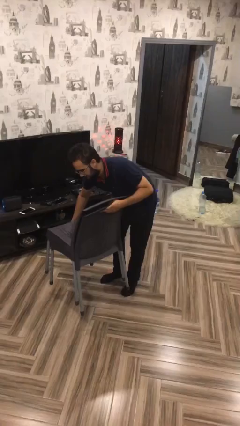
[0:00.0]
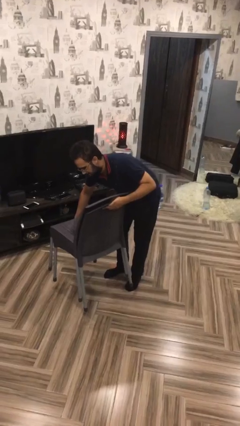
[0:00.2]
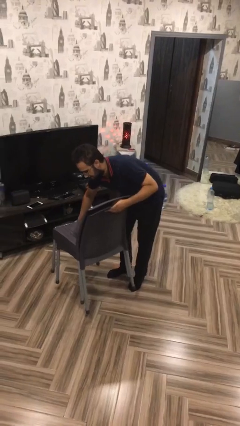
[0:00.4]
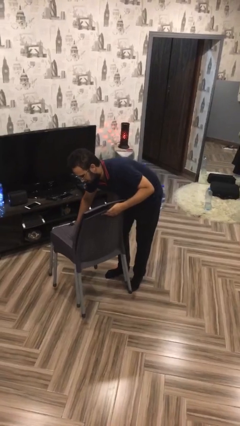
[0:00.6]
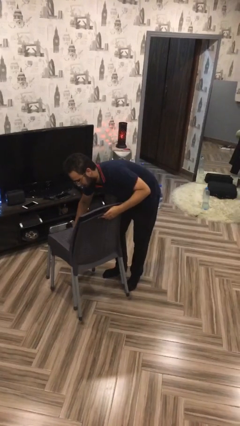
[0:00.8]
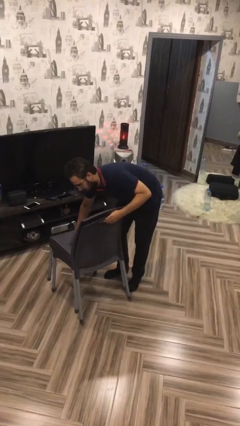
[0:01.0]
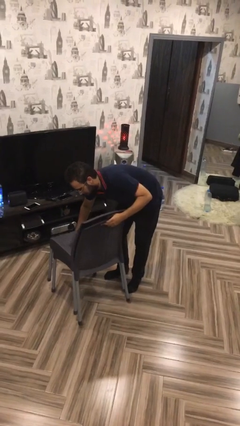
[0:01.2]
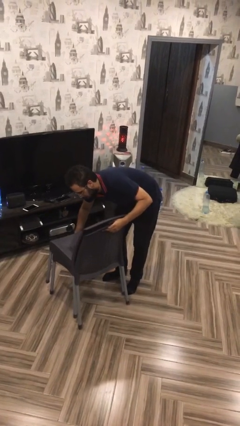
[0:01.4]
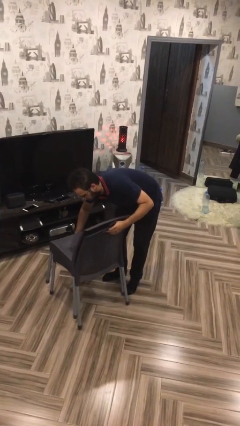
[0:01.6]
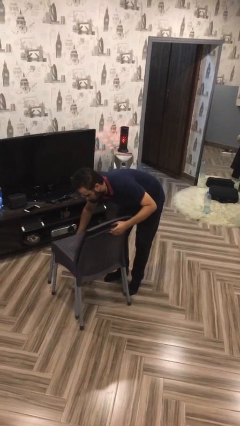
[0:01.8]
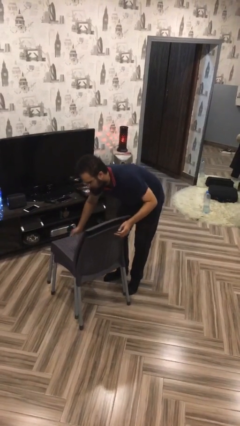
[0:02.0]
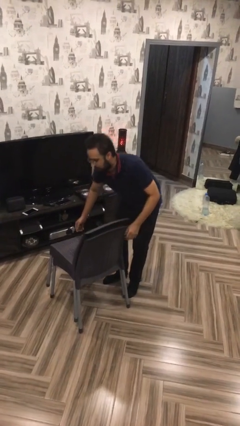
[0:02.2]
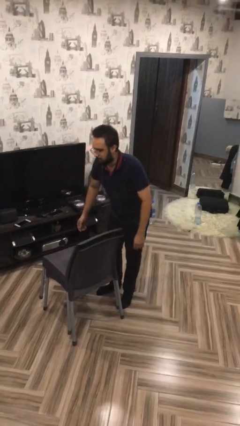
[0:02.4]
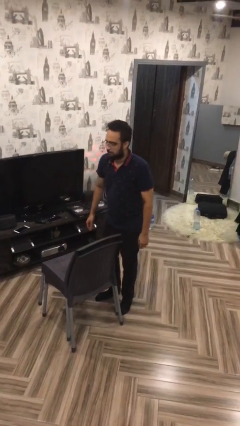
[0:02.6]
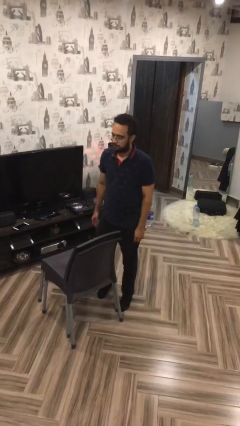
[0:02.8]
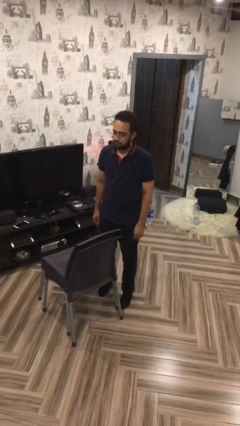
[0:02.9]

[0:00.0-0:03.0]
person puts down object on floor

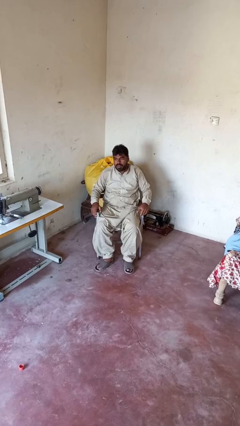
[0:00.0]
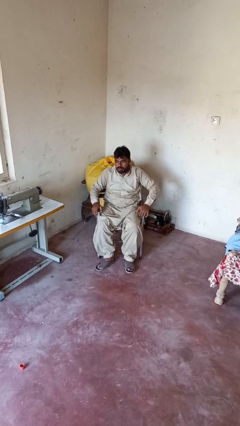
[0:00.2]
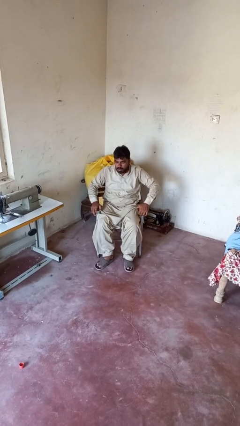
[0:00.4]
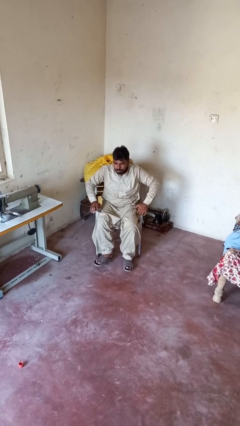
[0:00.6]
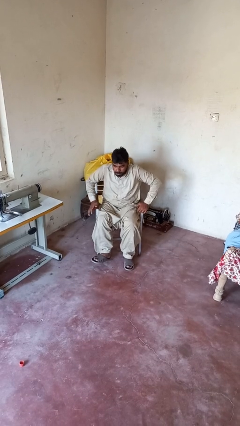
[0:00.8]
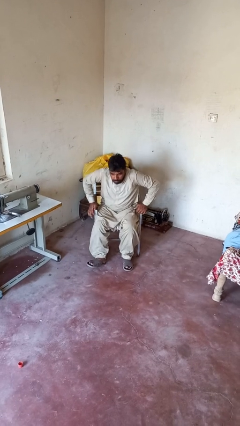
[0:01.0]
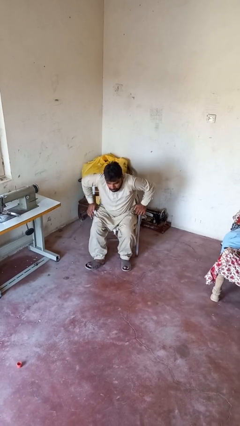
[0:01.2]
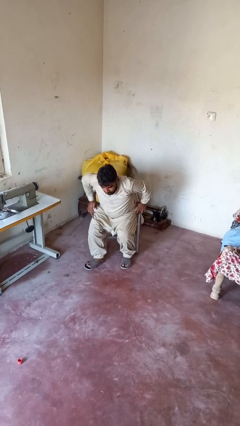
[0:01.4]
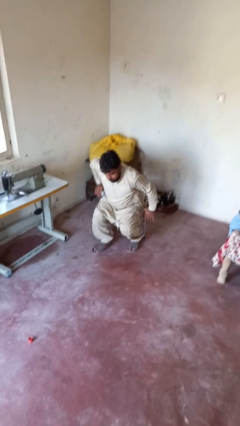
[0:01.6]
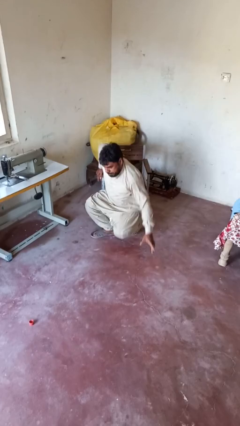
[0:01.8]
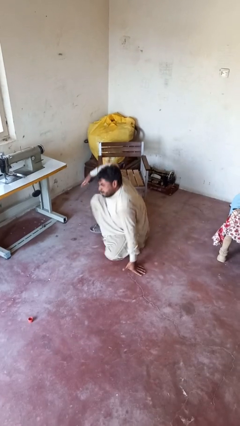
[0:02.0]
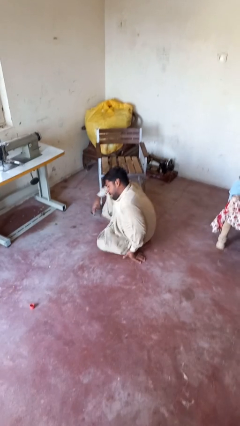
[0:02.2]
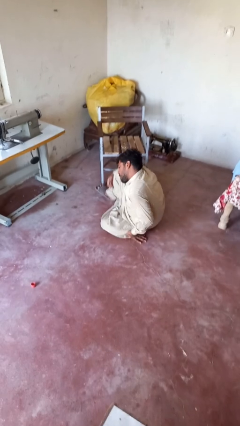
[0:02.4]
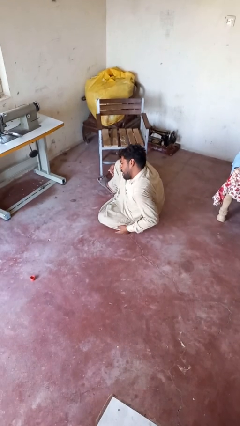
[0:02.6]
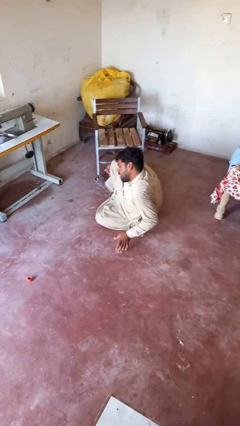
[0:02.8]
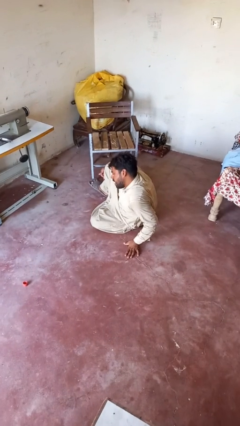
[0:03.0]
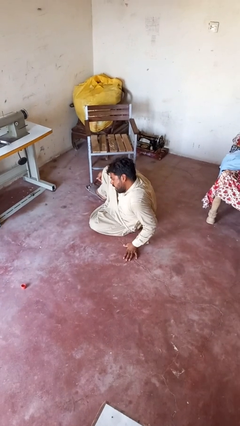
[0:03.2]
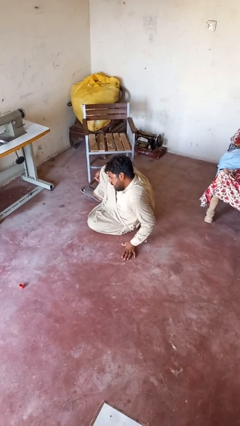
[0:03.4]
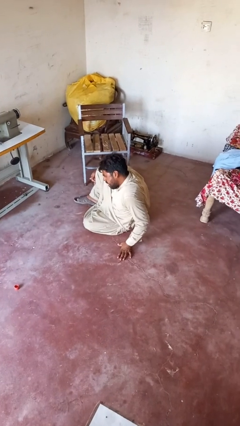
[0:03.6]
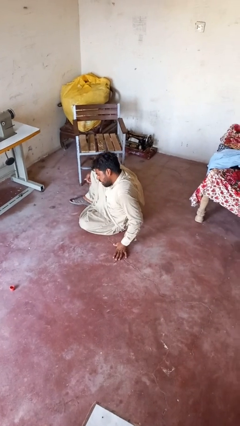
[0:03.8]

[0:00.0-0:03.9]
person falls from chair

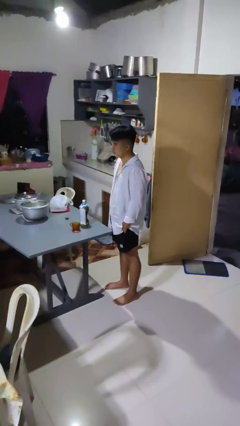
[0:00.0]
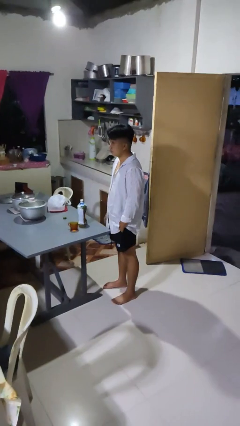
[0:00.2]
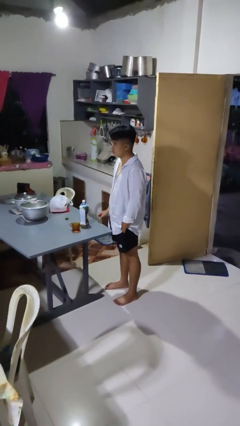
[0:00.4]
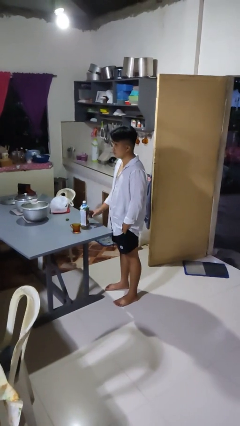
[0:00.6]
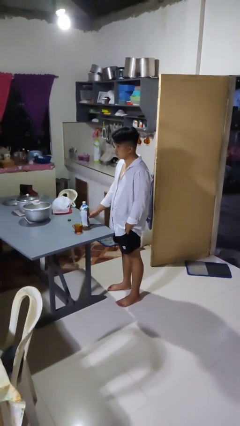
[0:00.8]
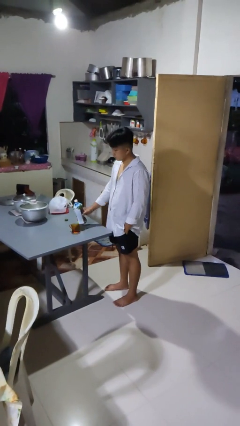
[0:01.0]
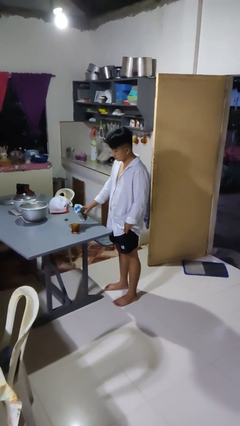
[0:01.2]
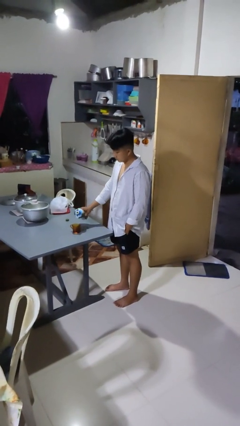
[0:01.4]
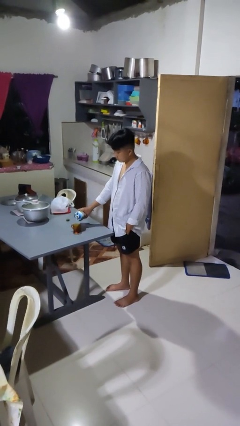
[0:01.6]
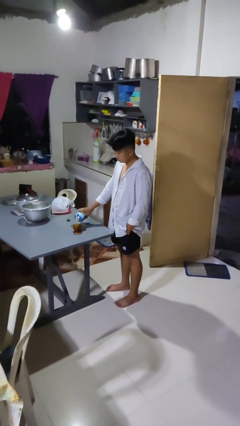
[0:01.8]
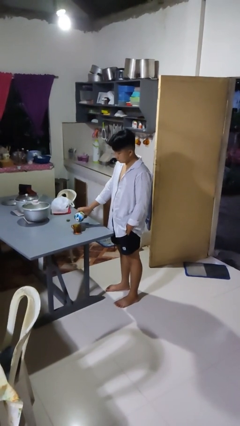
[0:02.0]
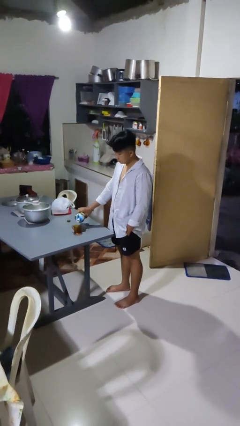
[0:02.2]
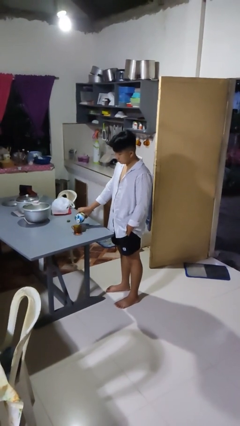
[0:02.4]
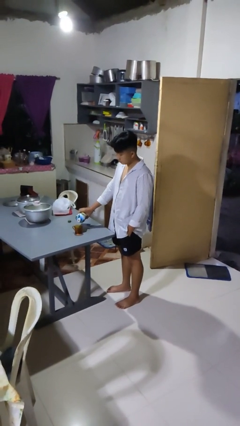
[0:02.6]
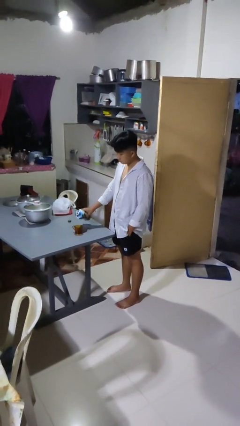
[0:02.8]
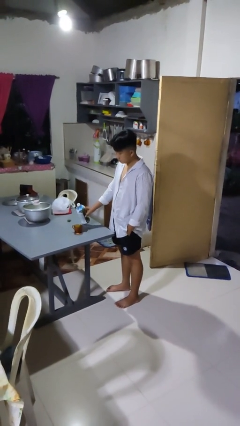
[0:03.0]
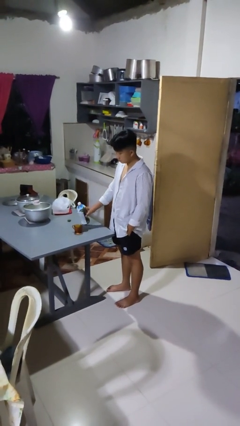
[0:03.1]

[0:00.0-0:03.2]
person pours liquid into cup

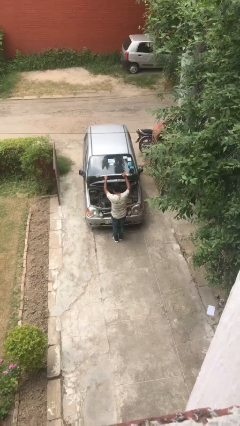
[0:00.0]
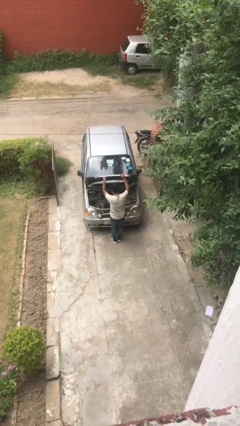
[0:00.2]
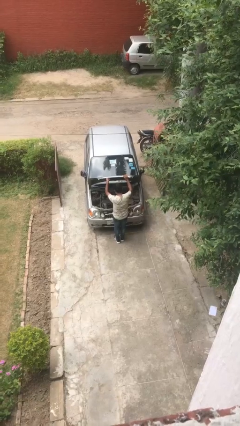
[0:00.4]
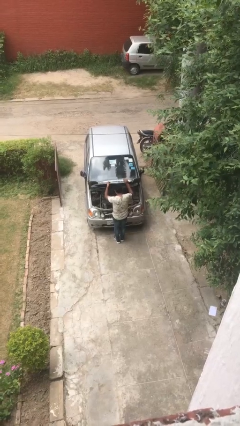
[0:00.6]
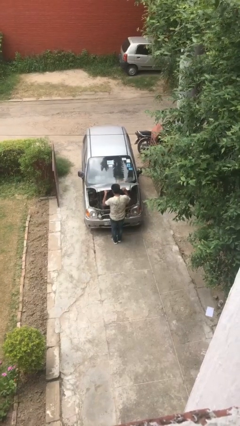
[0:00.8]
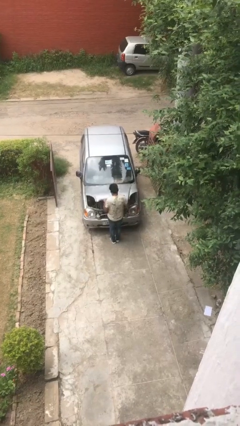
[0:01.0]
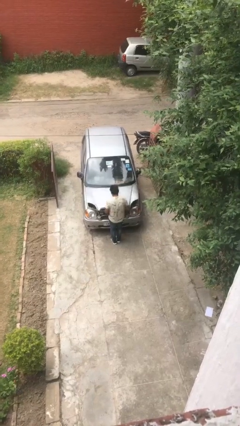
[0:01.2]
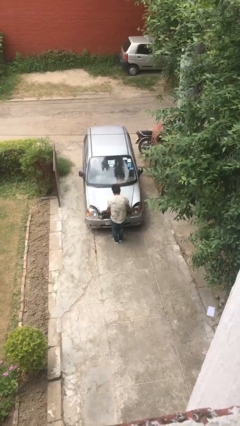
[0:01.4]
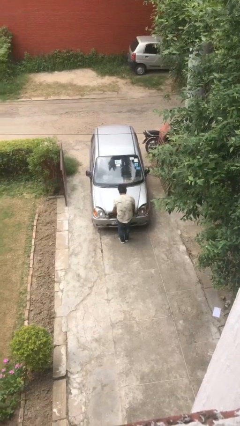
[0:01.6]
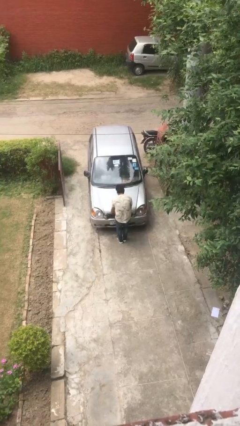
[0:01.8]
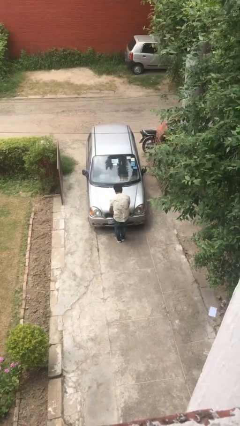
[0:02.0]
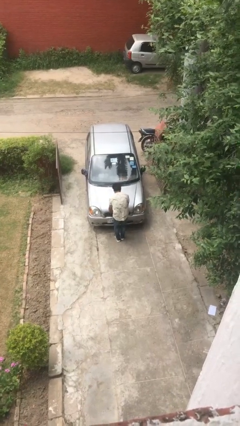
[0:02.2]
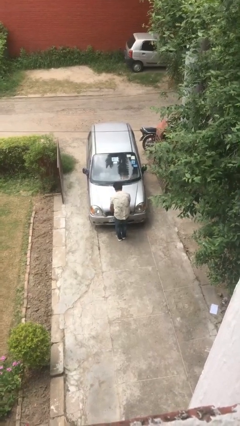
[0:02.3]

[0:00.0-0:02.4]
person closes car hood

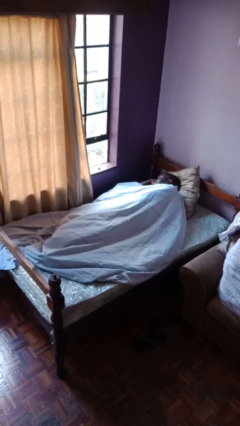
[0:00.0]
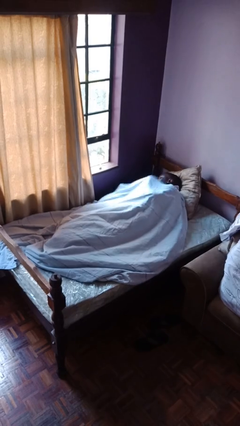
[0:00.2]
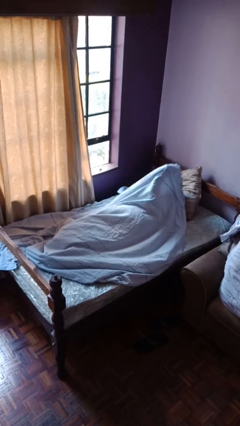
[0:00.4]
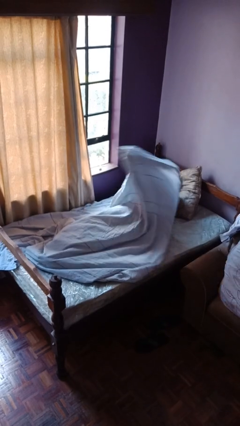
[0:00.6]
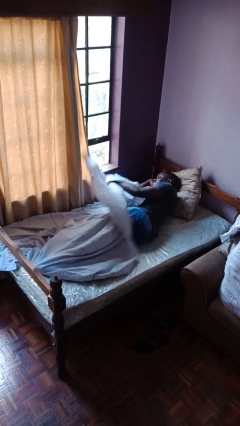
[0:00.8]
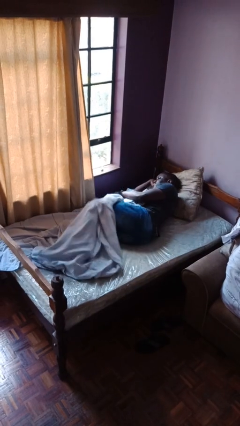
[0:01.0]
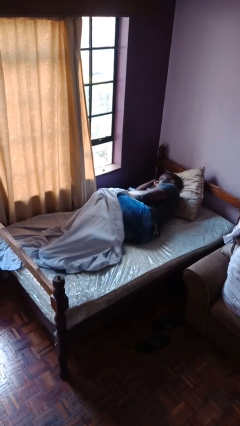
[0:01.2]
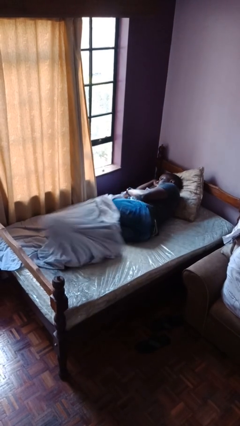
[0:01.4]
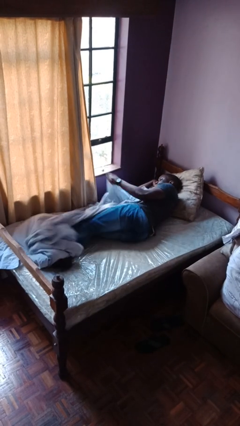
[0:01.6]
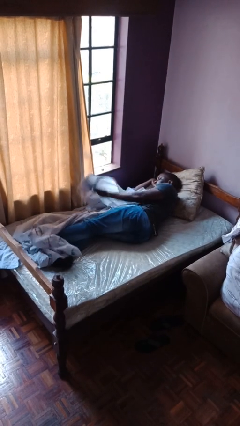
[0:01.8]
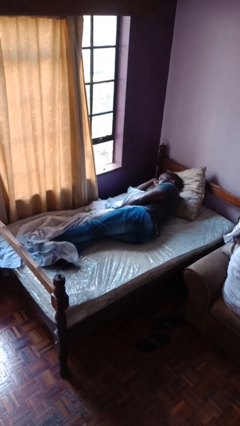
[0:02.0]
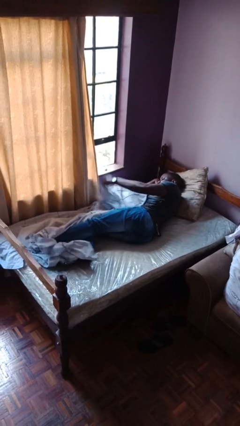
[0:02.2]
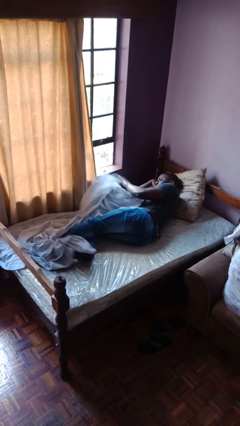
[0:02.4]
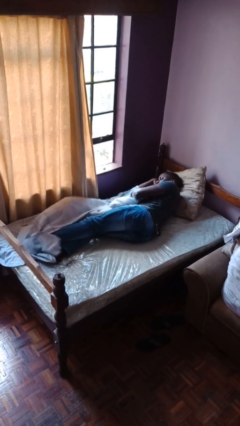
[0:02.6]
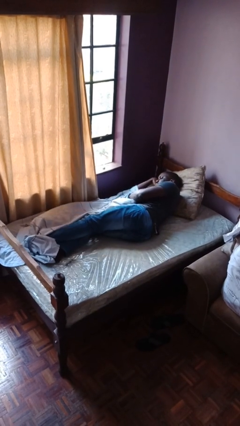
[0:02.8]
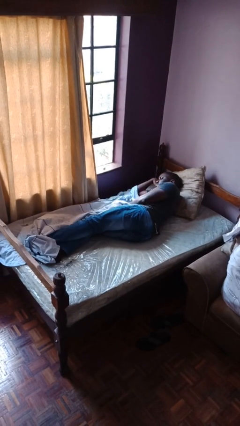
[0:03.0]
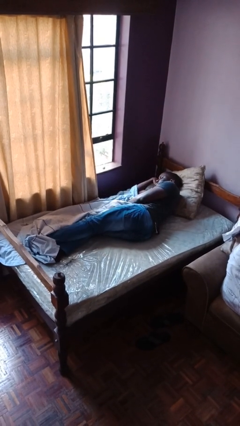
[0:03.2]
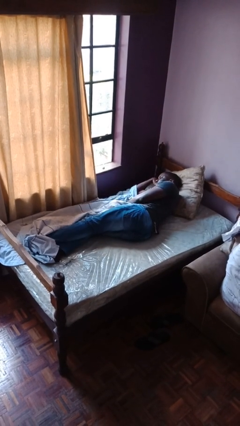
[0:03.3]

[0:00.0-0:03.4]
person uncovers with bedsheets

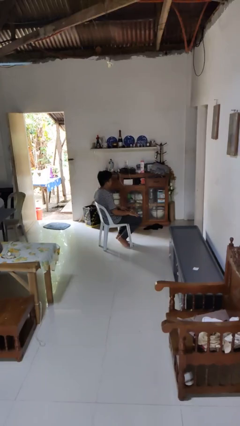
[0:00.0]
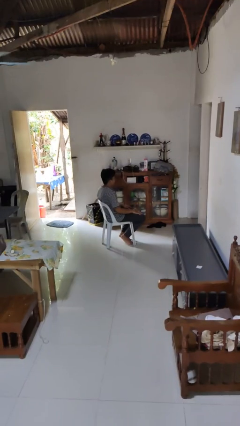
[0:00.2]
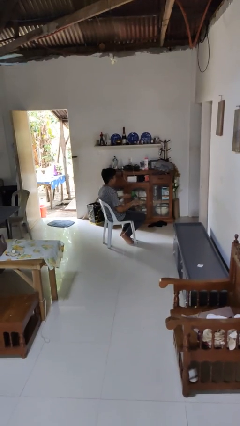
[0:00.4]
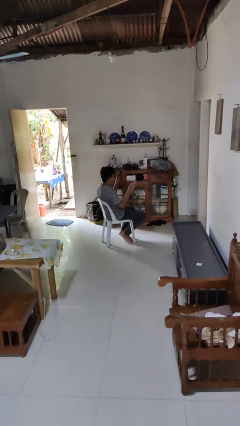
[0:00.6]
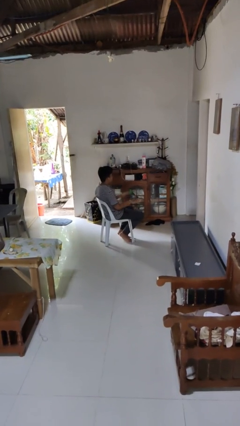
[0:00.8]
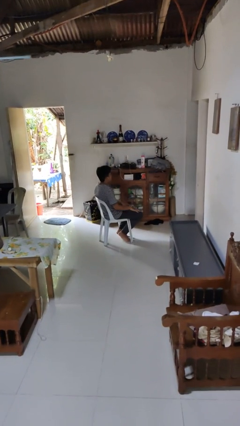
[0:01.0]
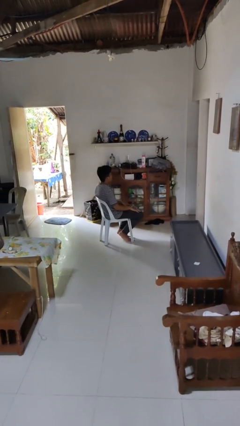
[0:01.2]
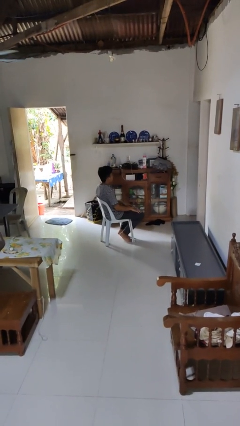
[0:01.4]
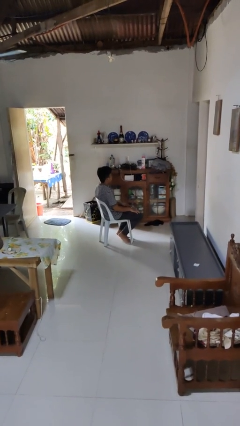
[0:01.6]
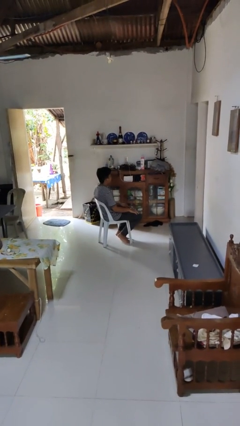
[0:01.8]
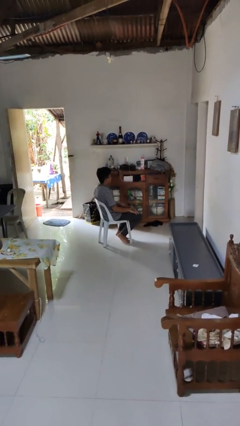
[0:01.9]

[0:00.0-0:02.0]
person slaps hands on thighs
